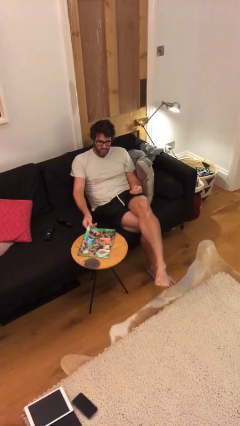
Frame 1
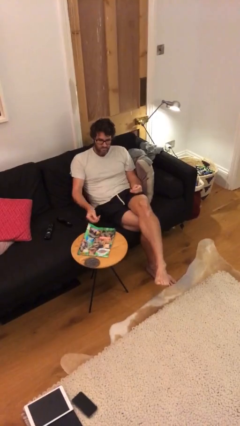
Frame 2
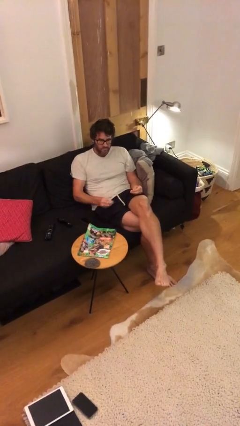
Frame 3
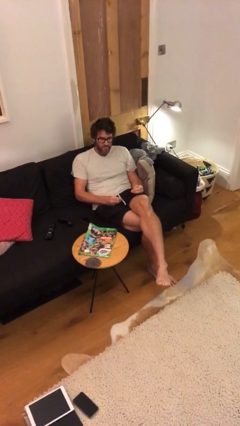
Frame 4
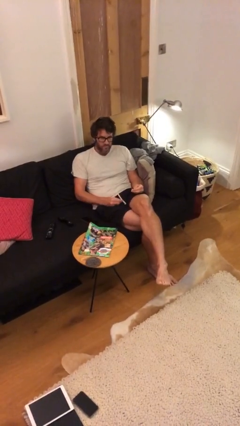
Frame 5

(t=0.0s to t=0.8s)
person puts down object on table

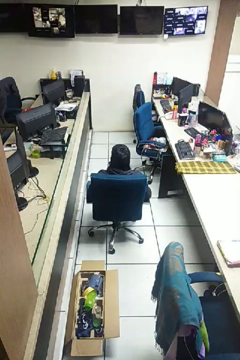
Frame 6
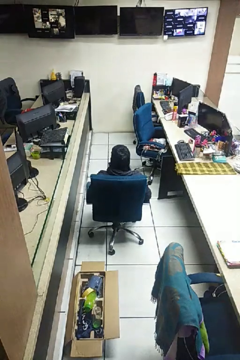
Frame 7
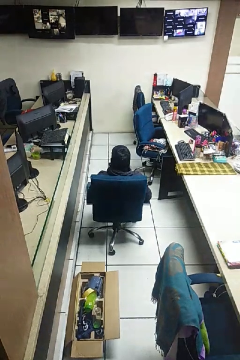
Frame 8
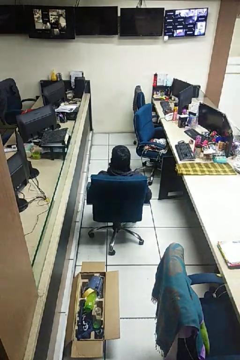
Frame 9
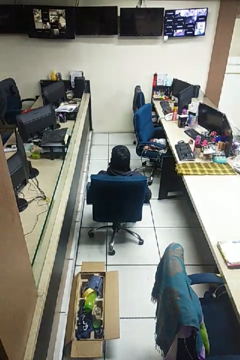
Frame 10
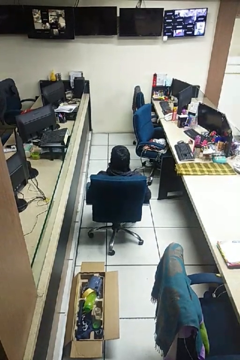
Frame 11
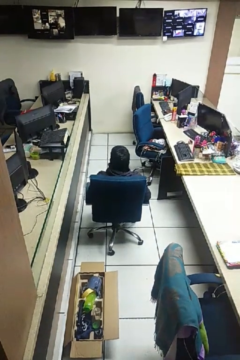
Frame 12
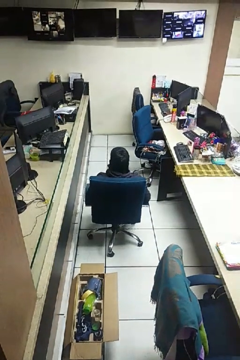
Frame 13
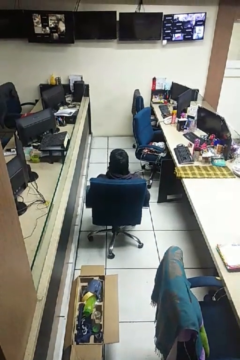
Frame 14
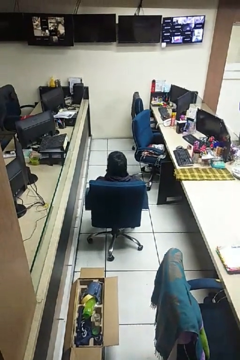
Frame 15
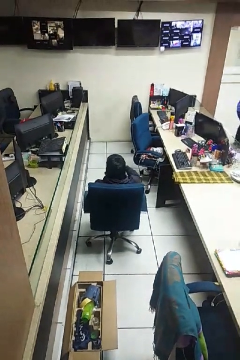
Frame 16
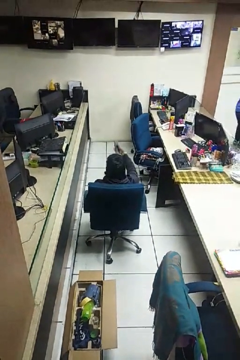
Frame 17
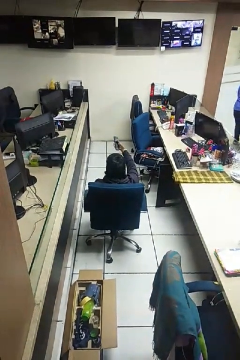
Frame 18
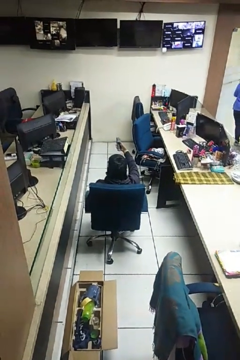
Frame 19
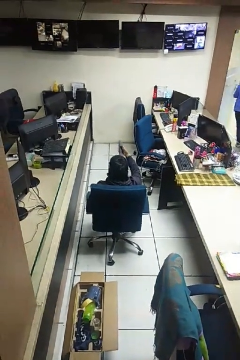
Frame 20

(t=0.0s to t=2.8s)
person uses television remote

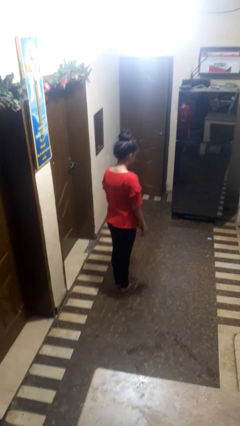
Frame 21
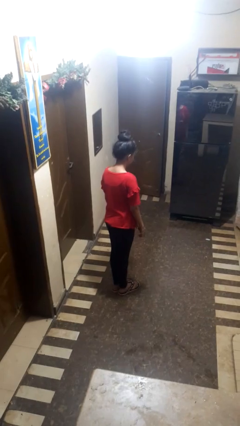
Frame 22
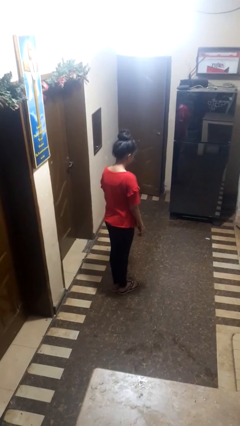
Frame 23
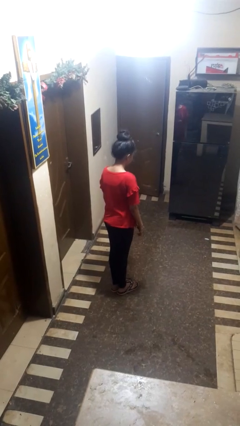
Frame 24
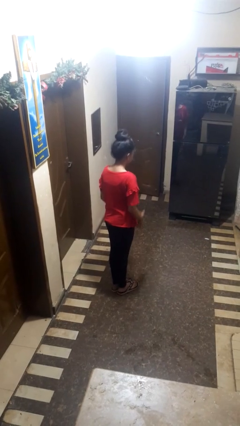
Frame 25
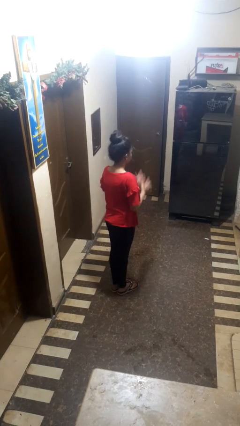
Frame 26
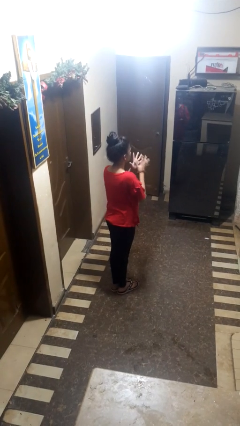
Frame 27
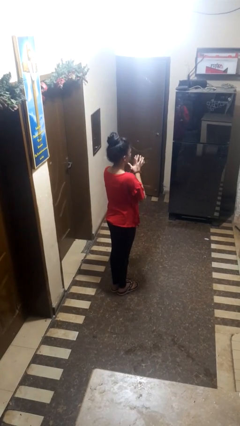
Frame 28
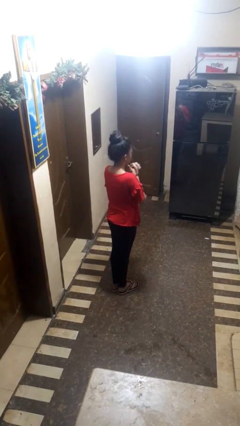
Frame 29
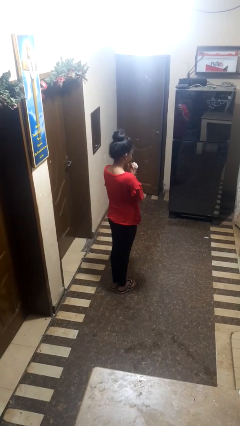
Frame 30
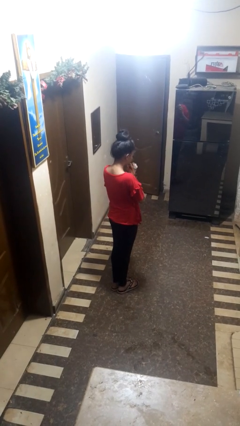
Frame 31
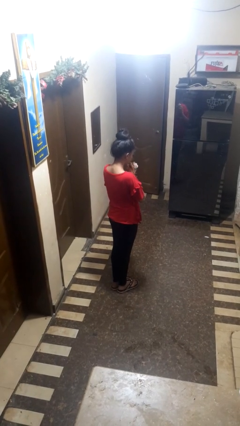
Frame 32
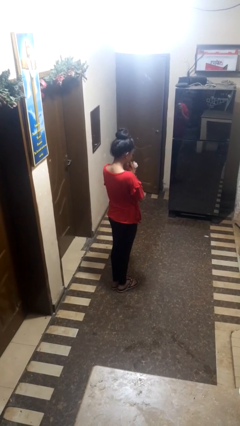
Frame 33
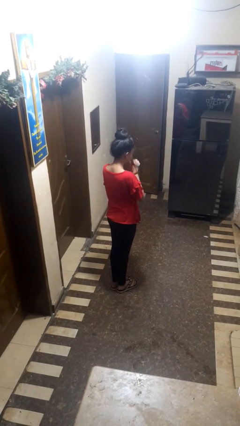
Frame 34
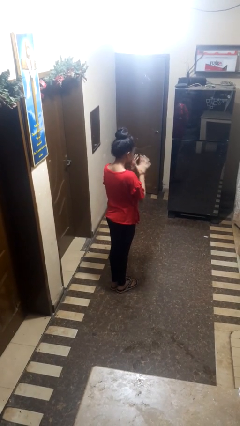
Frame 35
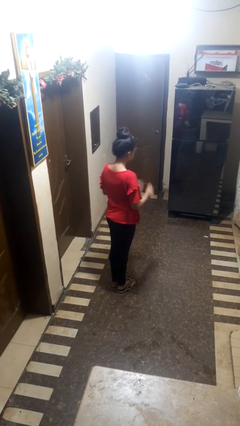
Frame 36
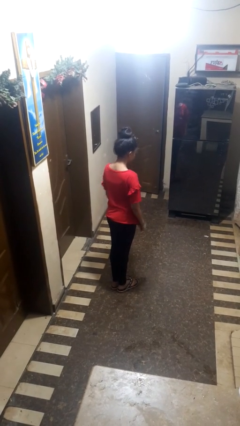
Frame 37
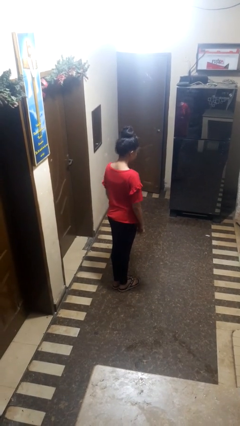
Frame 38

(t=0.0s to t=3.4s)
person prays

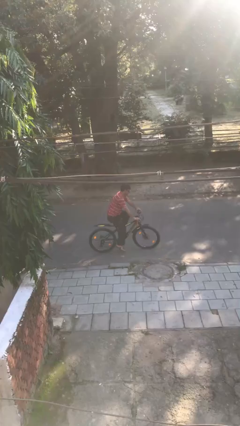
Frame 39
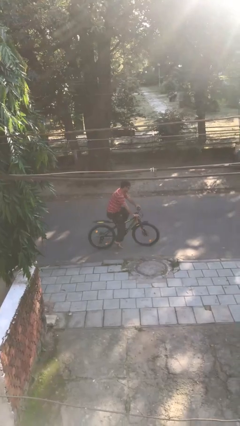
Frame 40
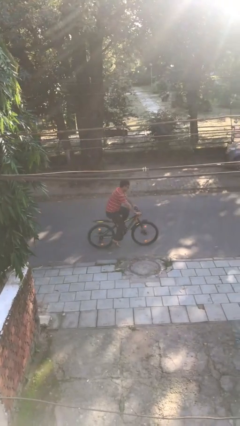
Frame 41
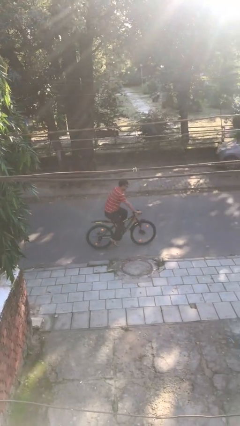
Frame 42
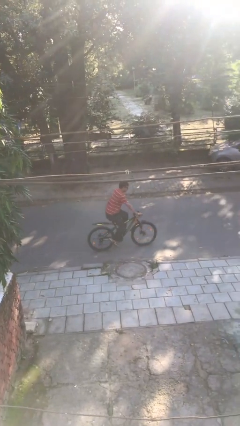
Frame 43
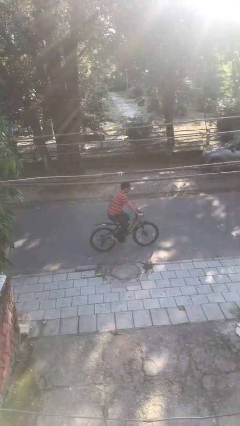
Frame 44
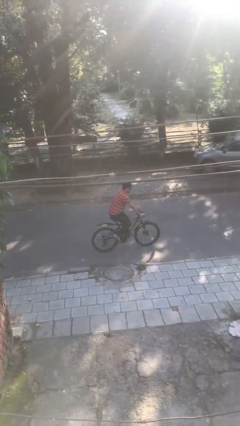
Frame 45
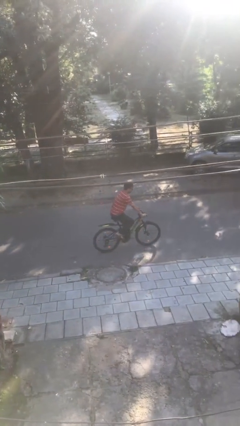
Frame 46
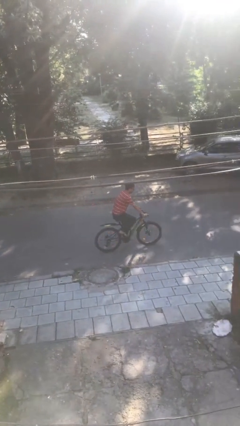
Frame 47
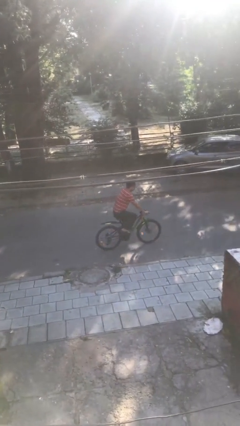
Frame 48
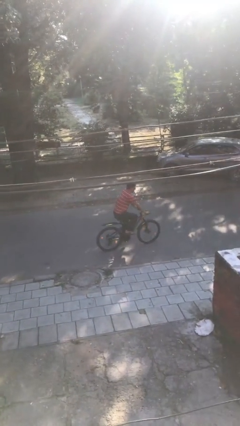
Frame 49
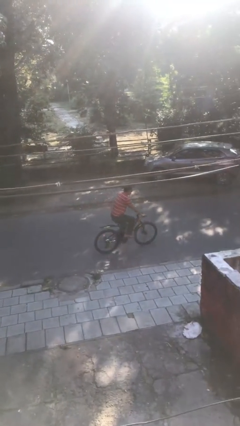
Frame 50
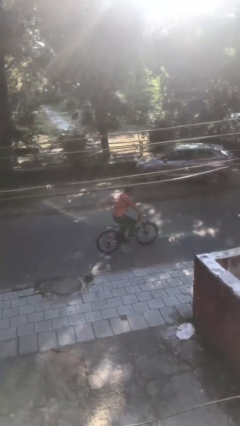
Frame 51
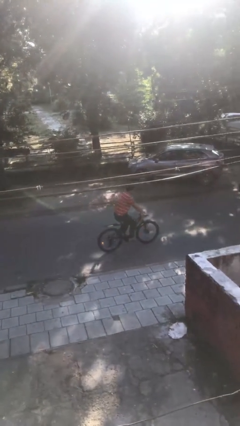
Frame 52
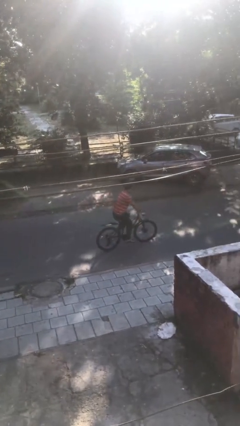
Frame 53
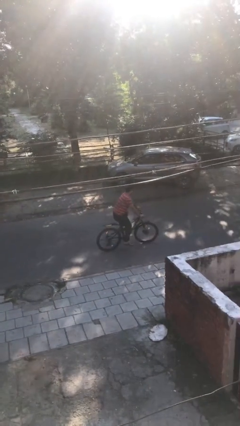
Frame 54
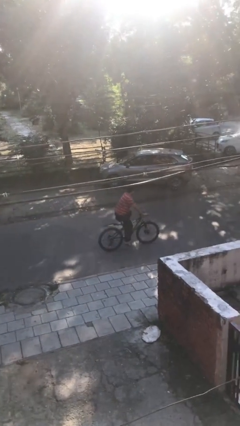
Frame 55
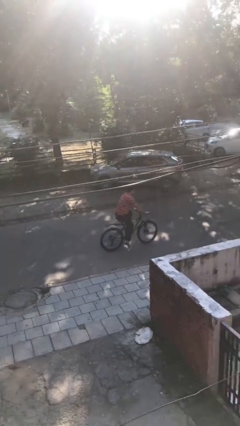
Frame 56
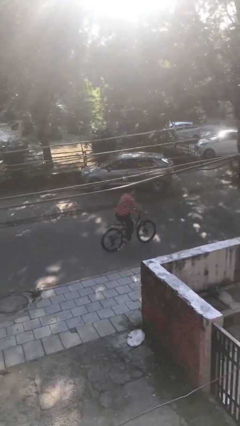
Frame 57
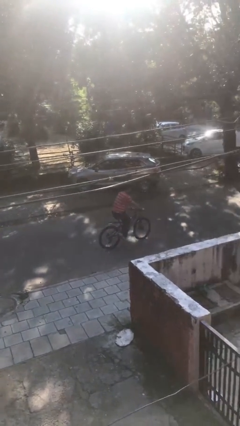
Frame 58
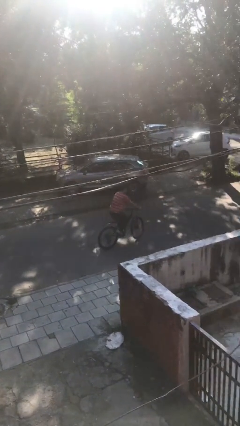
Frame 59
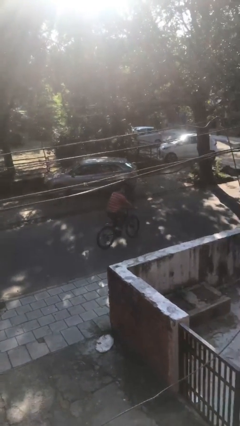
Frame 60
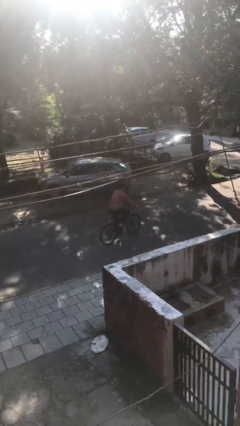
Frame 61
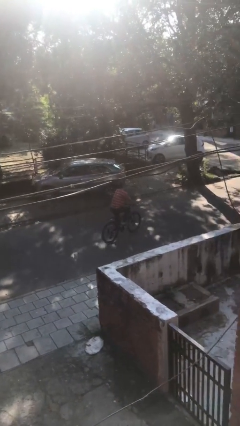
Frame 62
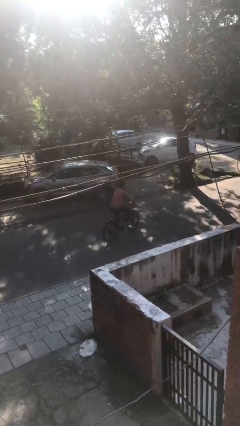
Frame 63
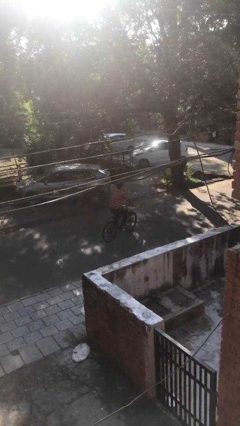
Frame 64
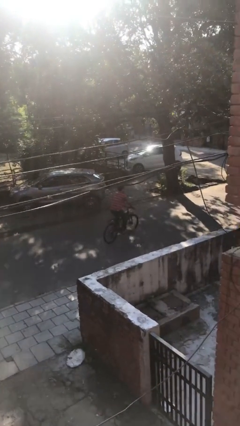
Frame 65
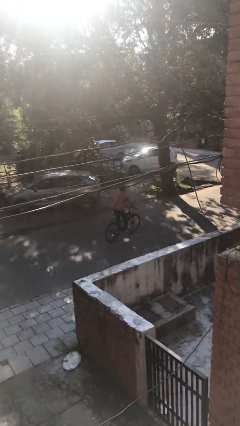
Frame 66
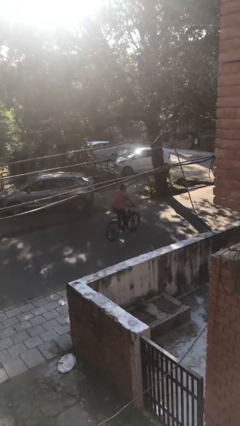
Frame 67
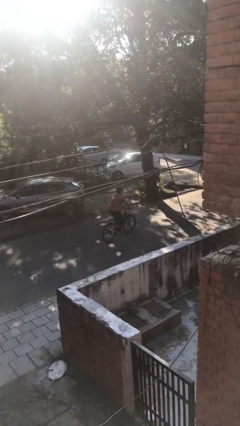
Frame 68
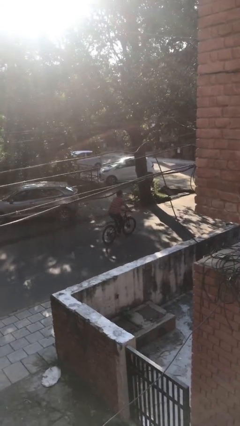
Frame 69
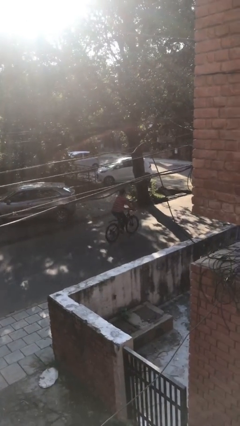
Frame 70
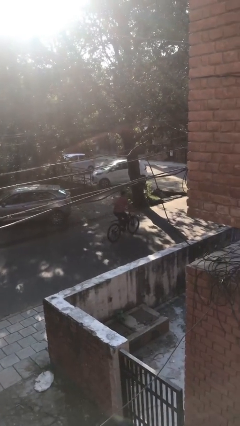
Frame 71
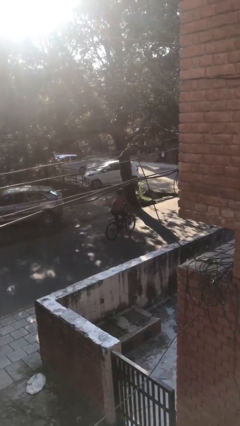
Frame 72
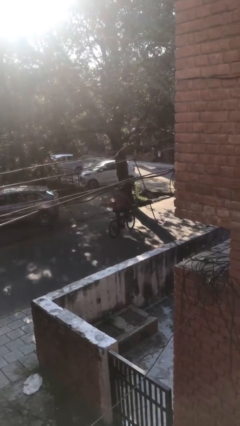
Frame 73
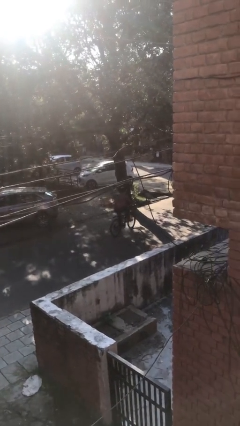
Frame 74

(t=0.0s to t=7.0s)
person rides bicycle

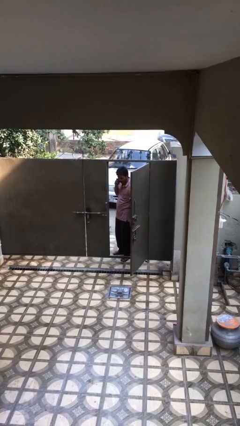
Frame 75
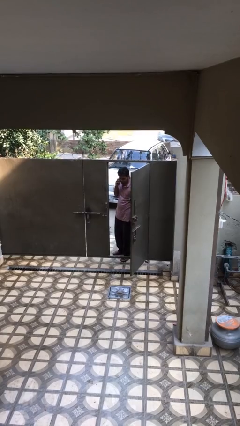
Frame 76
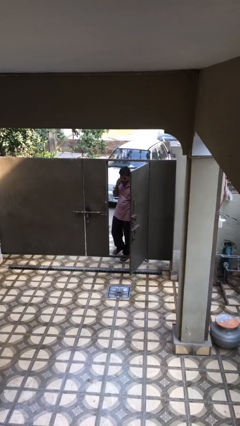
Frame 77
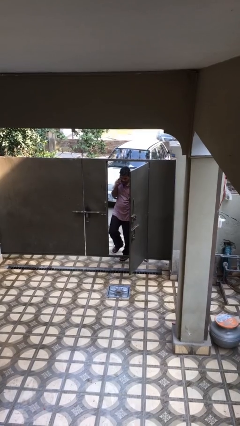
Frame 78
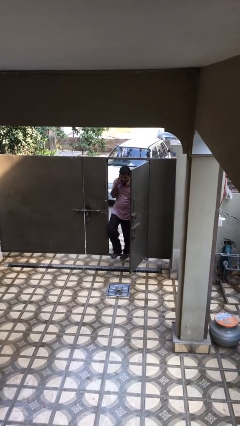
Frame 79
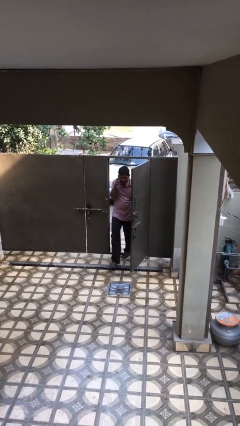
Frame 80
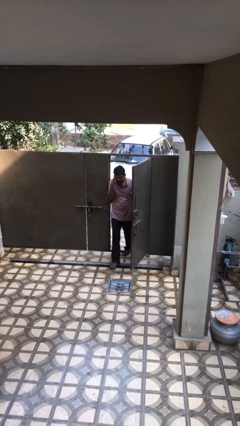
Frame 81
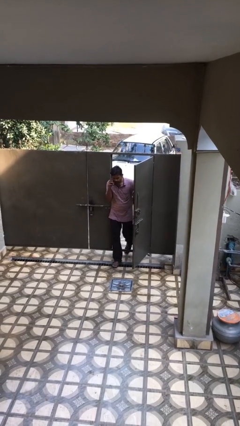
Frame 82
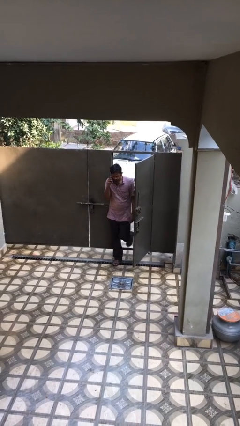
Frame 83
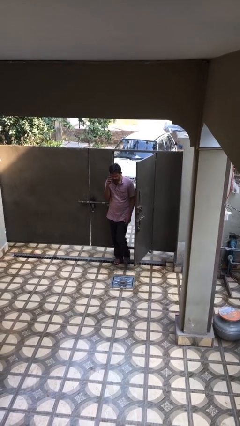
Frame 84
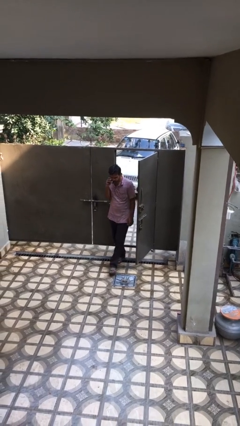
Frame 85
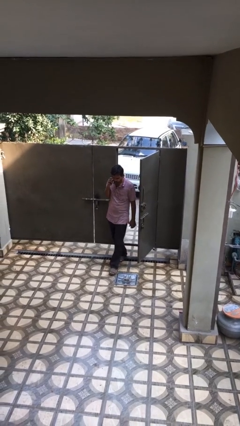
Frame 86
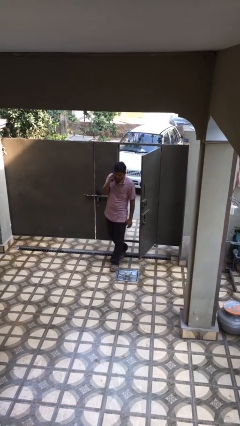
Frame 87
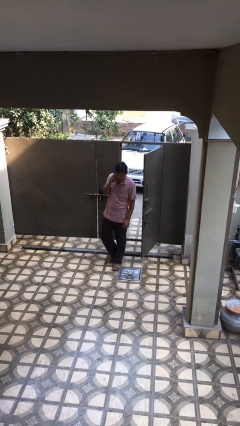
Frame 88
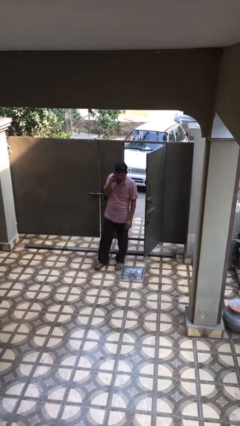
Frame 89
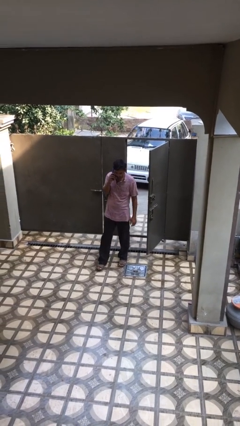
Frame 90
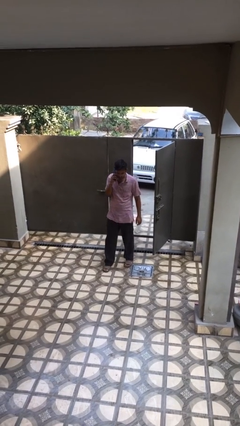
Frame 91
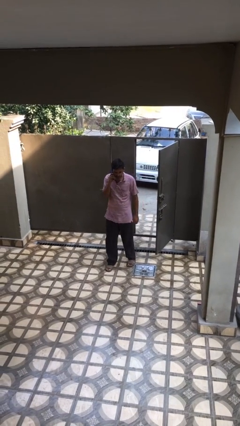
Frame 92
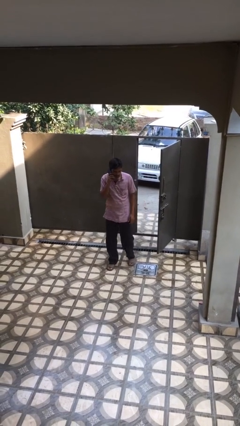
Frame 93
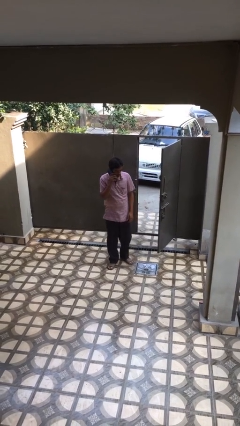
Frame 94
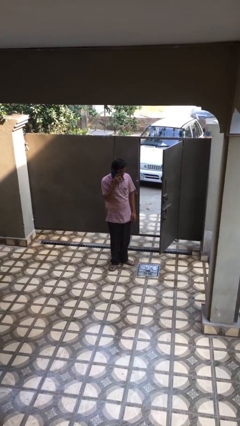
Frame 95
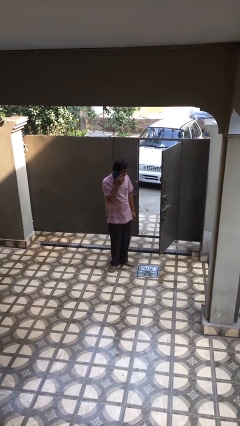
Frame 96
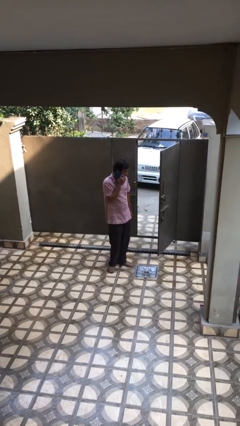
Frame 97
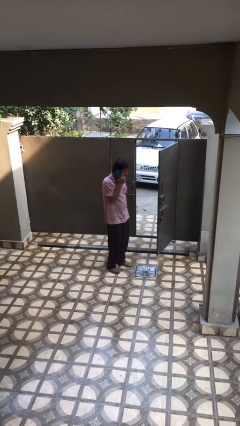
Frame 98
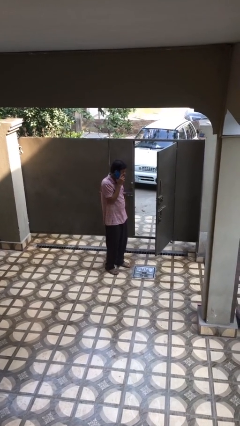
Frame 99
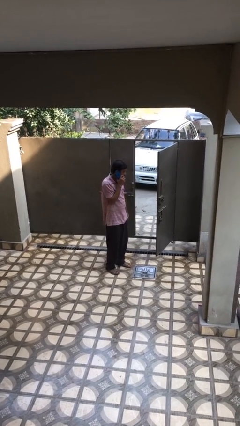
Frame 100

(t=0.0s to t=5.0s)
person enters scene through structure
